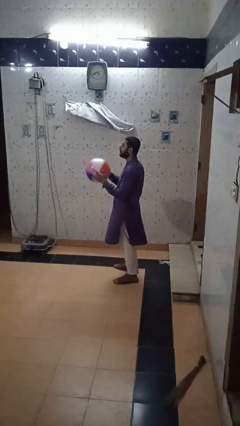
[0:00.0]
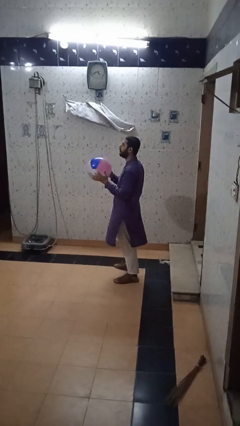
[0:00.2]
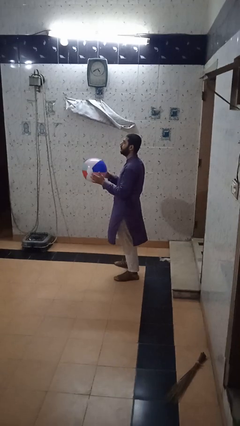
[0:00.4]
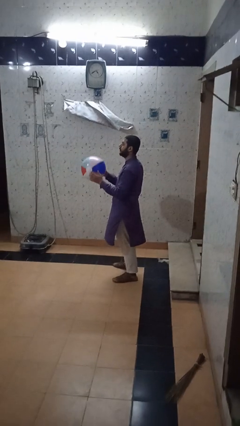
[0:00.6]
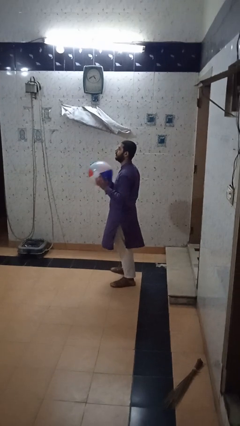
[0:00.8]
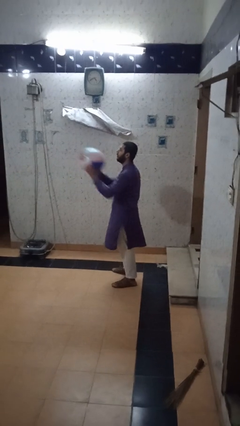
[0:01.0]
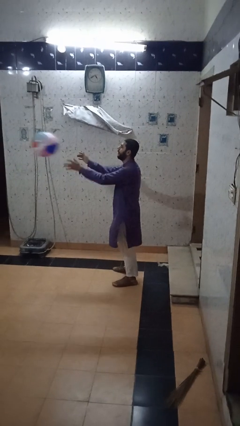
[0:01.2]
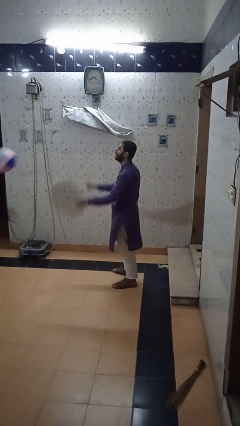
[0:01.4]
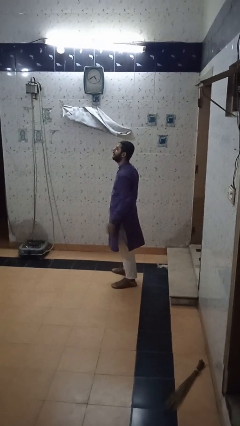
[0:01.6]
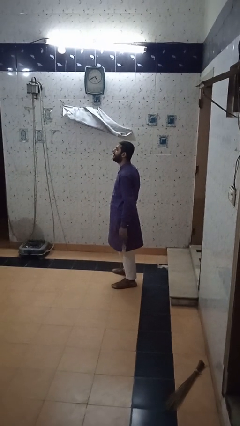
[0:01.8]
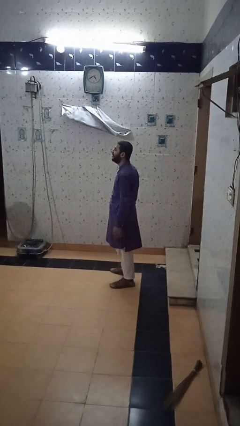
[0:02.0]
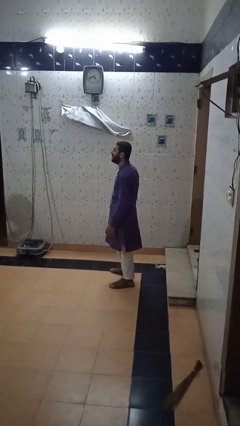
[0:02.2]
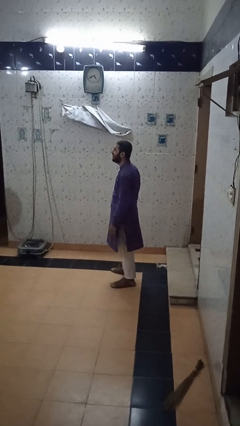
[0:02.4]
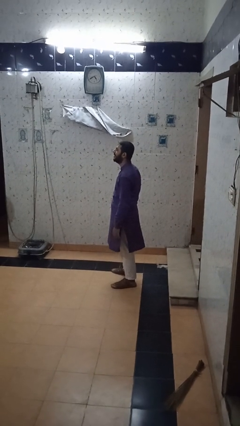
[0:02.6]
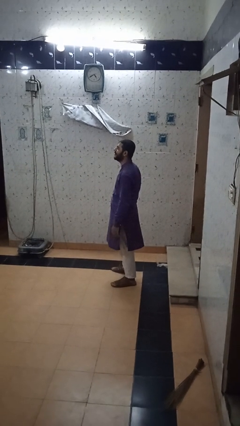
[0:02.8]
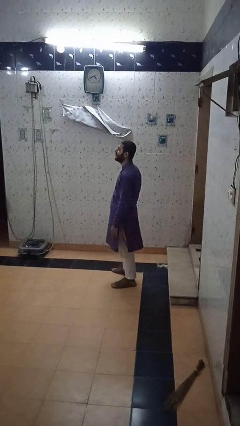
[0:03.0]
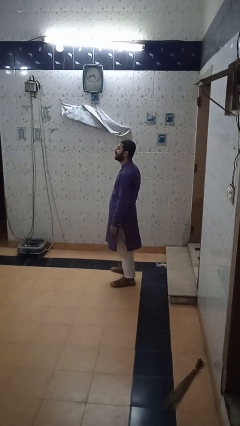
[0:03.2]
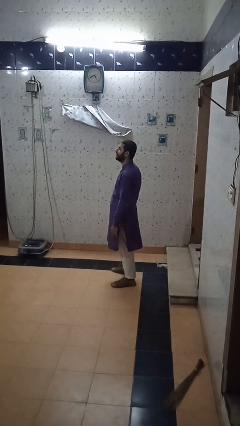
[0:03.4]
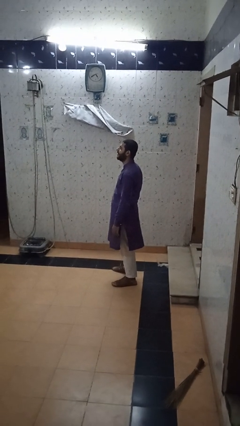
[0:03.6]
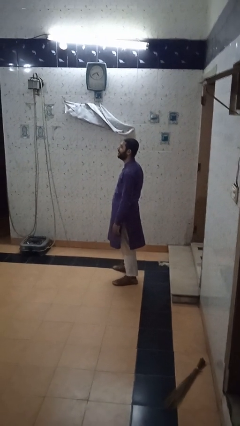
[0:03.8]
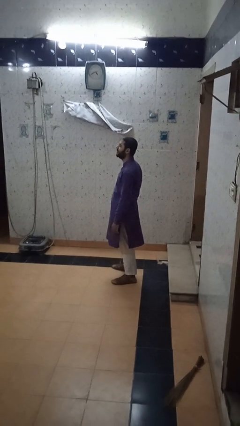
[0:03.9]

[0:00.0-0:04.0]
person throws object to person

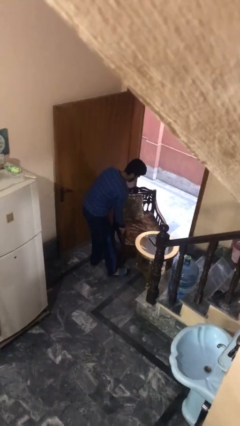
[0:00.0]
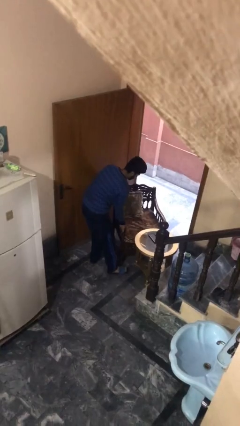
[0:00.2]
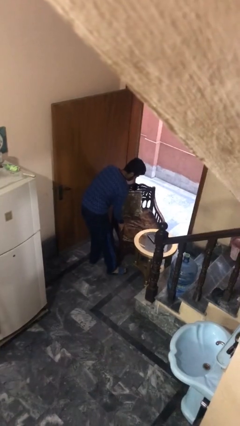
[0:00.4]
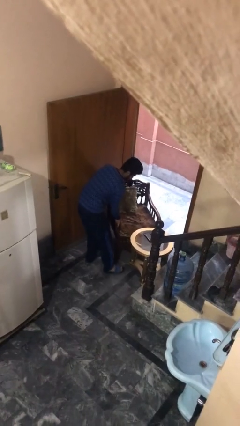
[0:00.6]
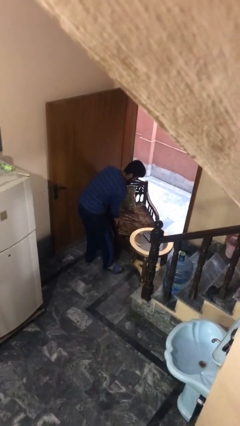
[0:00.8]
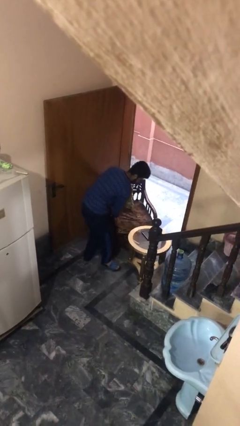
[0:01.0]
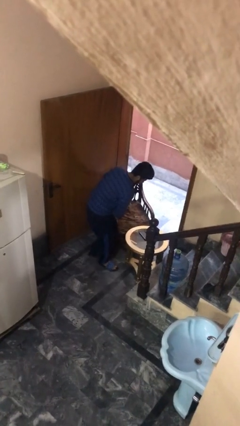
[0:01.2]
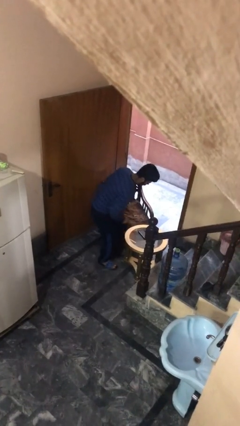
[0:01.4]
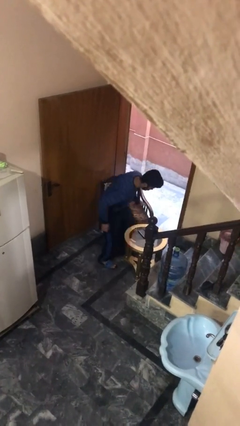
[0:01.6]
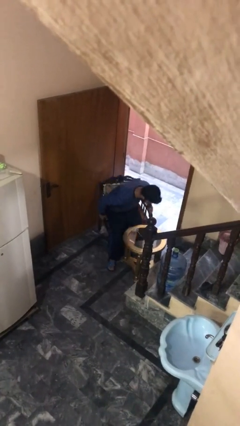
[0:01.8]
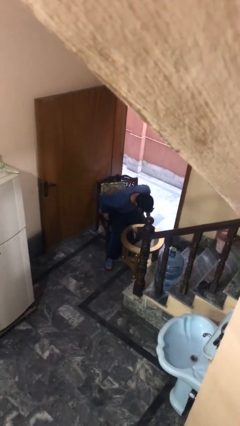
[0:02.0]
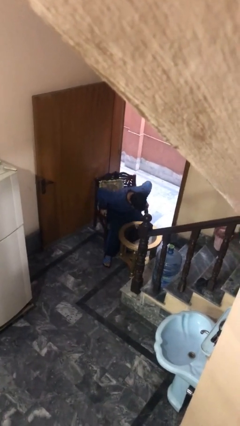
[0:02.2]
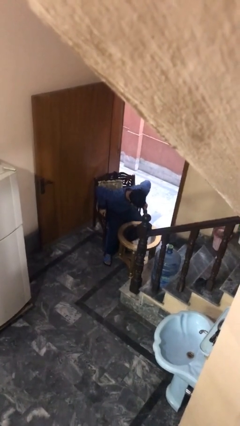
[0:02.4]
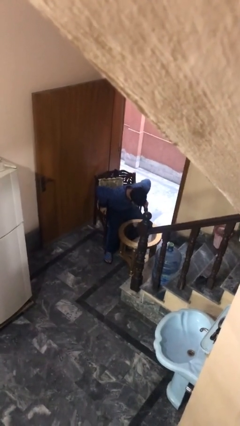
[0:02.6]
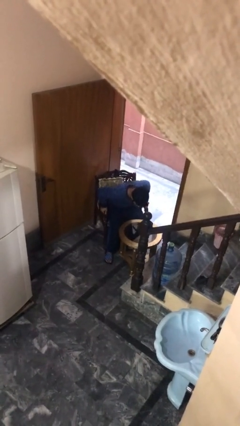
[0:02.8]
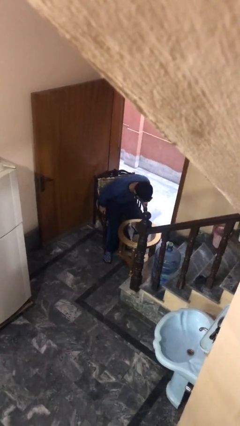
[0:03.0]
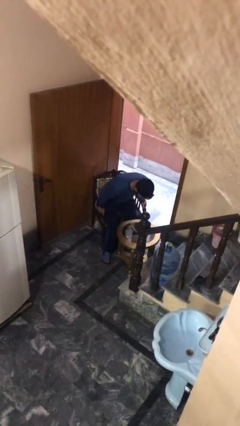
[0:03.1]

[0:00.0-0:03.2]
person sits down

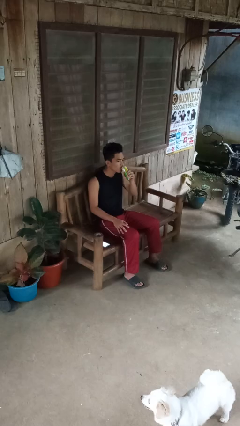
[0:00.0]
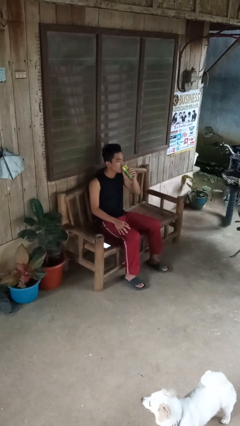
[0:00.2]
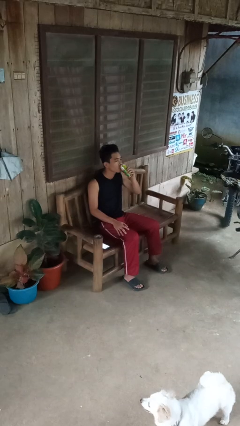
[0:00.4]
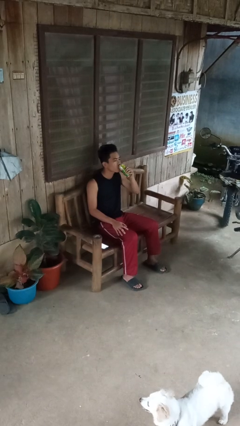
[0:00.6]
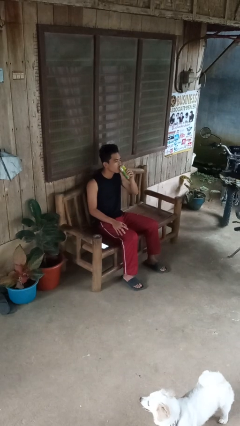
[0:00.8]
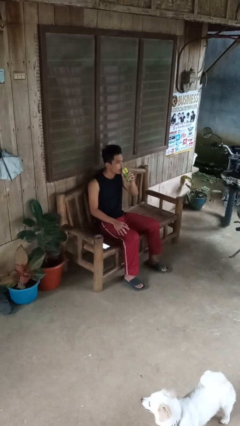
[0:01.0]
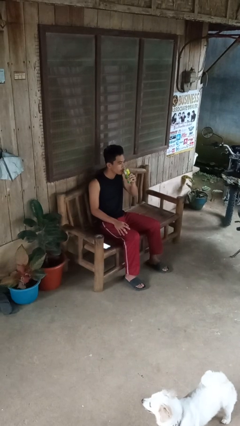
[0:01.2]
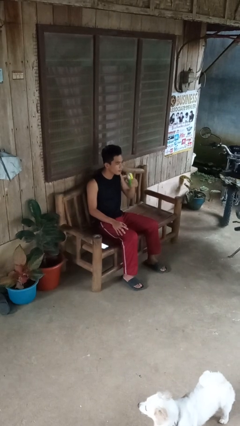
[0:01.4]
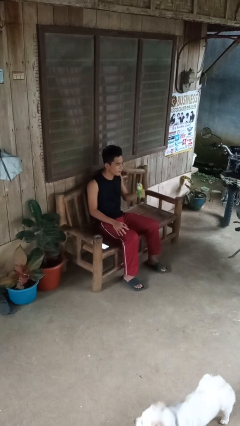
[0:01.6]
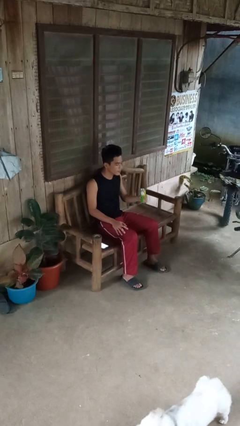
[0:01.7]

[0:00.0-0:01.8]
person drinks from beverage can

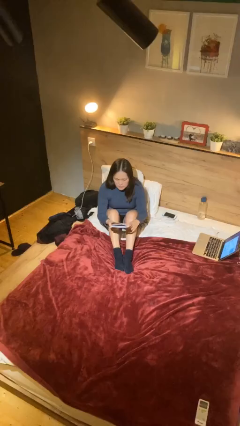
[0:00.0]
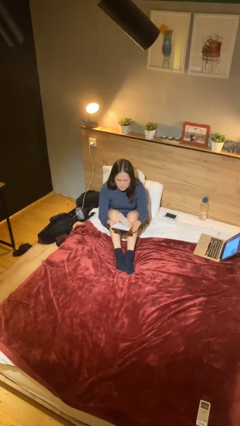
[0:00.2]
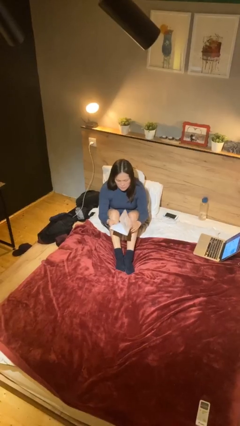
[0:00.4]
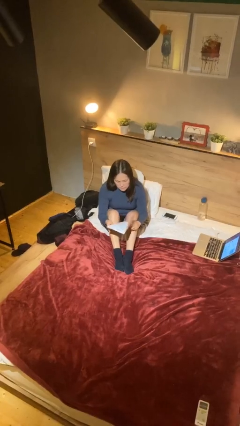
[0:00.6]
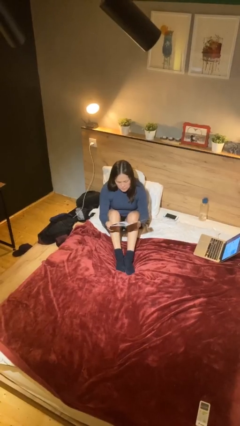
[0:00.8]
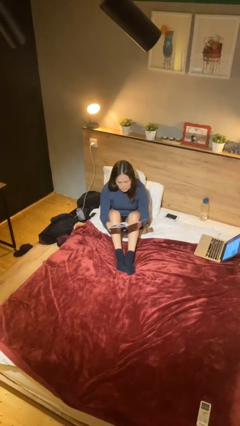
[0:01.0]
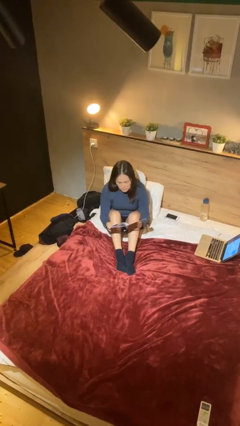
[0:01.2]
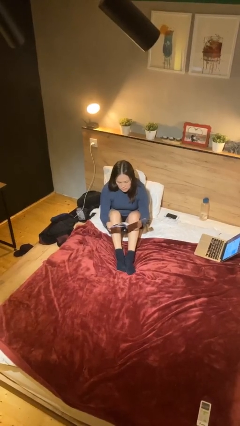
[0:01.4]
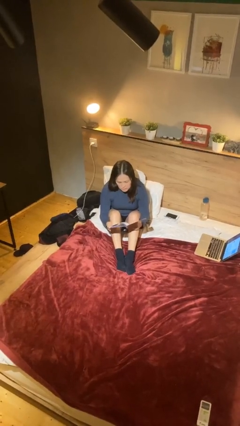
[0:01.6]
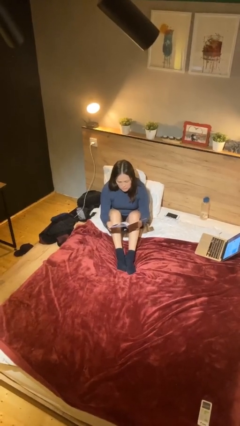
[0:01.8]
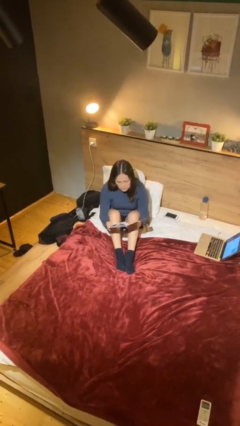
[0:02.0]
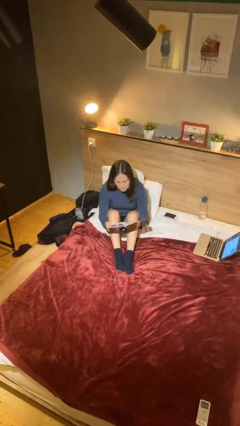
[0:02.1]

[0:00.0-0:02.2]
person reads document

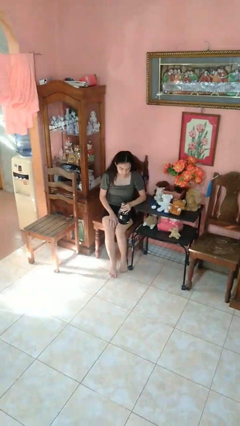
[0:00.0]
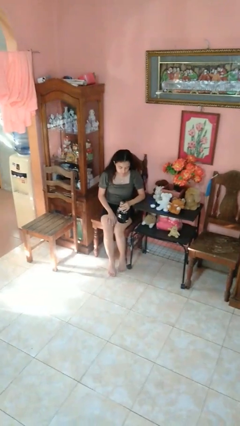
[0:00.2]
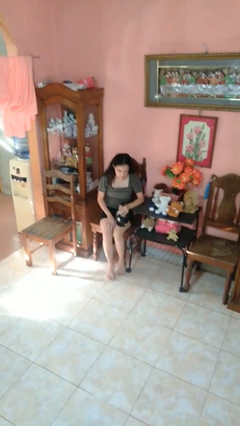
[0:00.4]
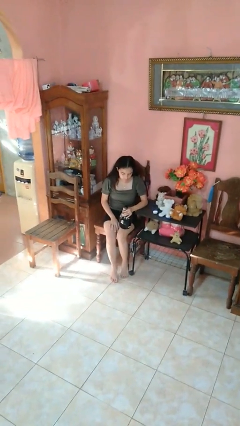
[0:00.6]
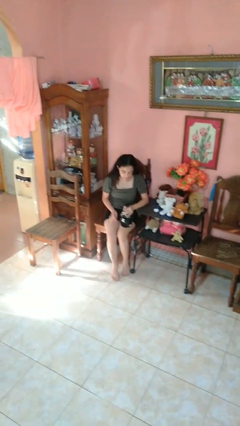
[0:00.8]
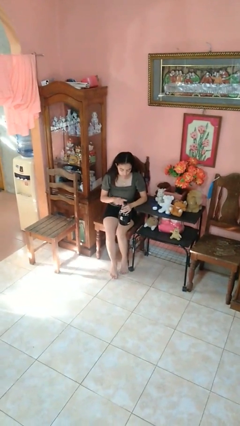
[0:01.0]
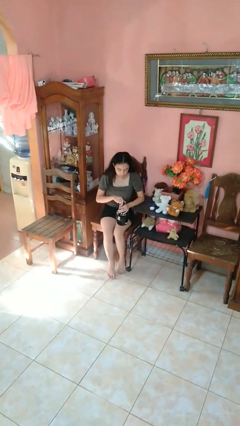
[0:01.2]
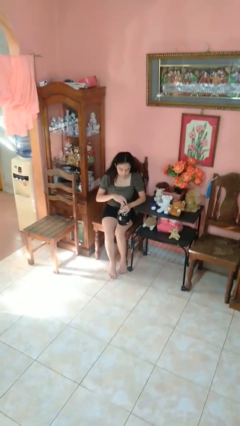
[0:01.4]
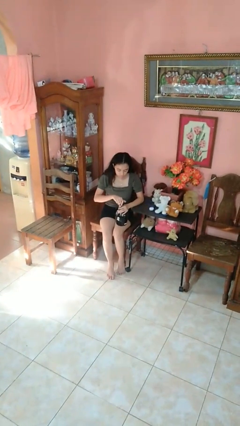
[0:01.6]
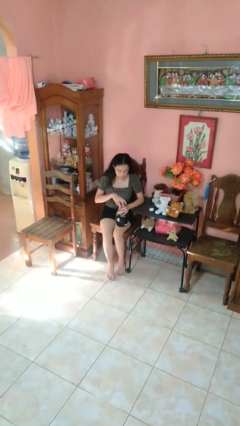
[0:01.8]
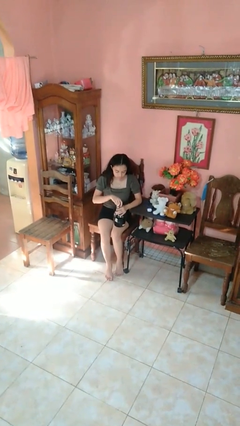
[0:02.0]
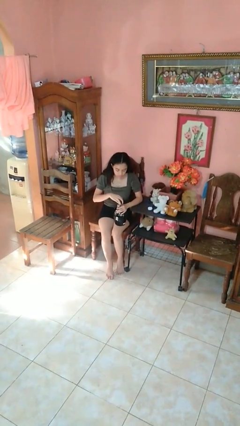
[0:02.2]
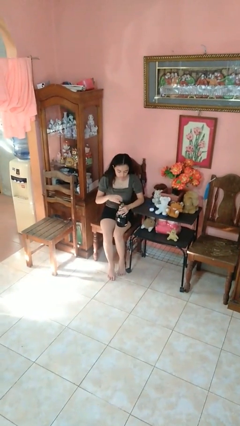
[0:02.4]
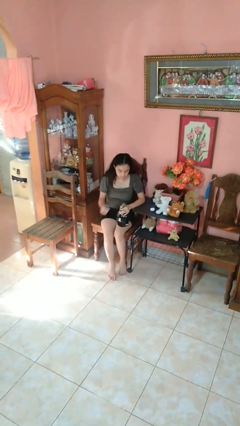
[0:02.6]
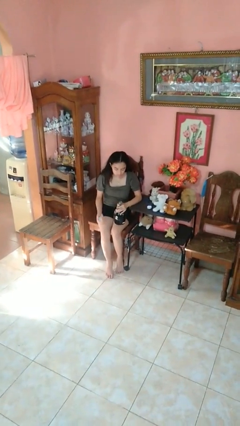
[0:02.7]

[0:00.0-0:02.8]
person unscrews lid from bottle

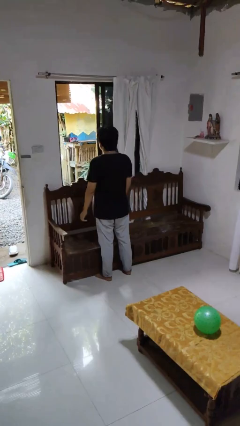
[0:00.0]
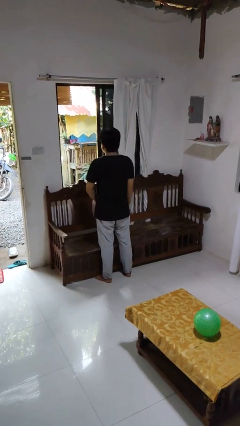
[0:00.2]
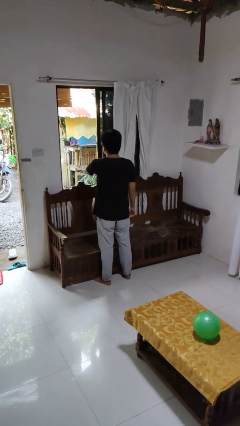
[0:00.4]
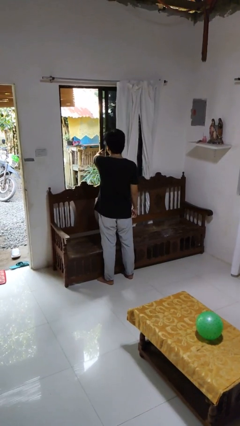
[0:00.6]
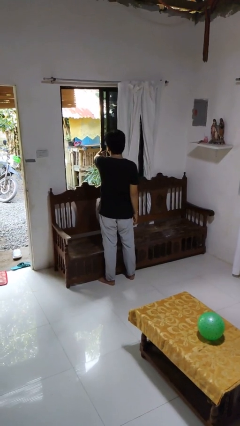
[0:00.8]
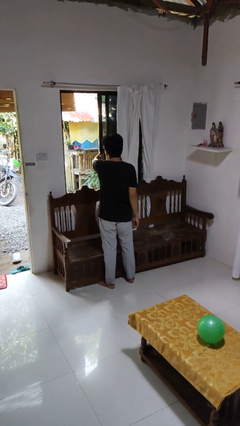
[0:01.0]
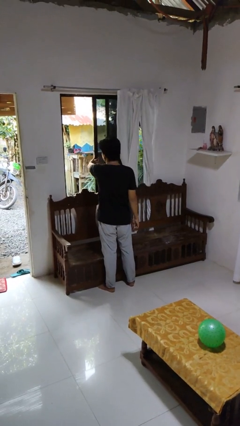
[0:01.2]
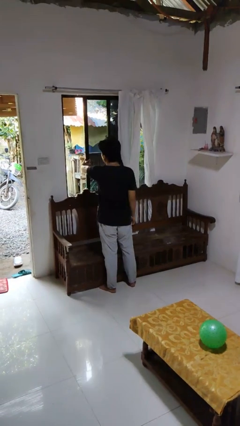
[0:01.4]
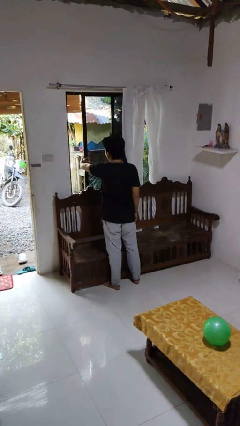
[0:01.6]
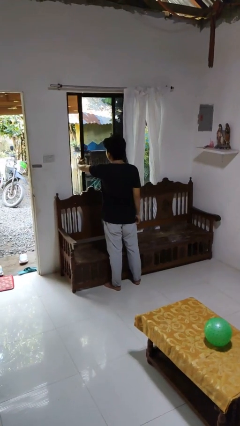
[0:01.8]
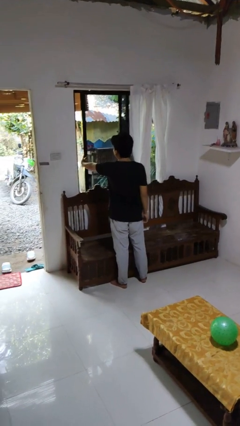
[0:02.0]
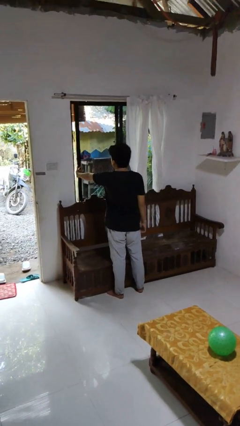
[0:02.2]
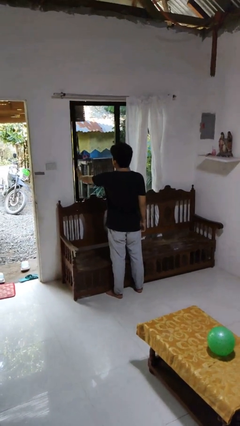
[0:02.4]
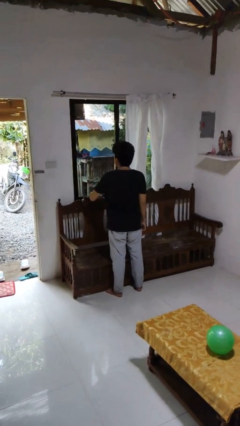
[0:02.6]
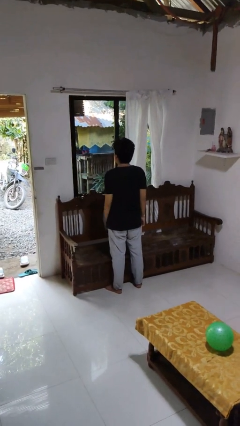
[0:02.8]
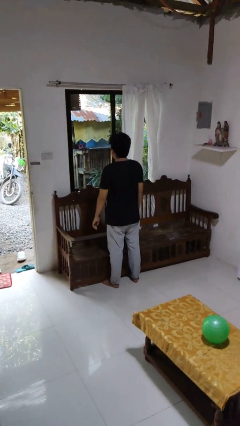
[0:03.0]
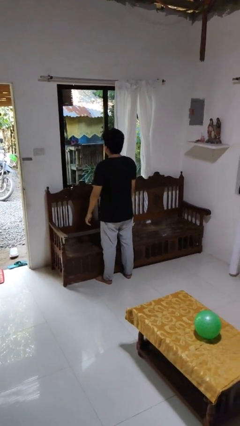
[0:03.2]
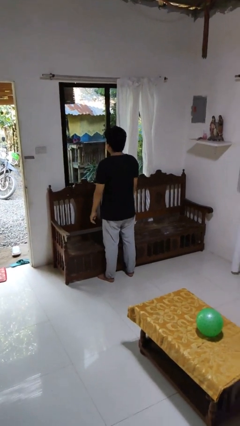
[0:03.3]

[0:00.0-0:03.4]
person closes home window
